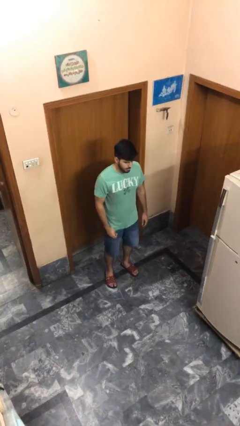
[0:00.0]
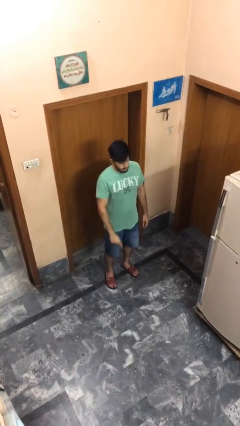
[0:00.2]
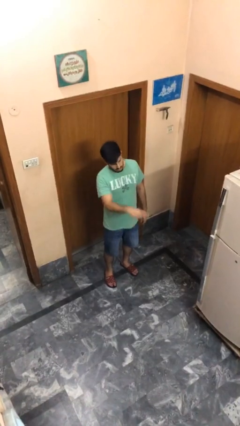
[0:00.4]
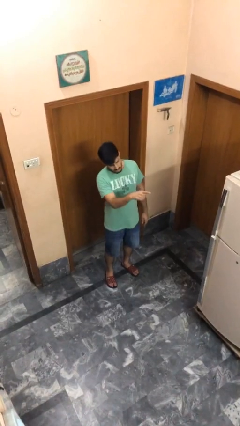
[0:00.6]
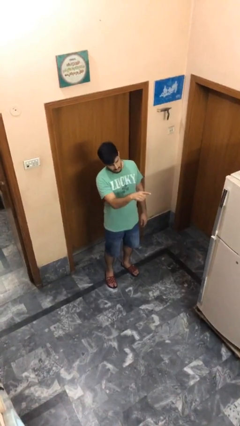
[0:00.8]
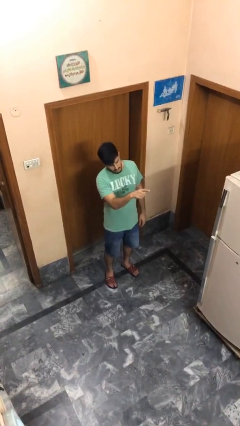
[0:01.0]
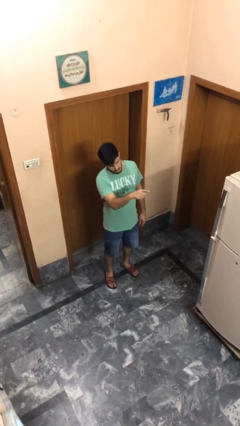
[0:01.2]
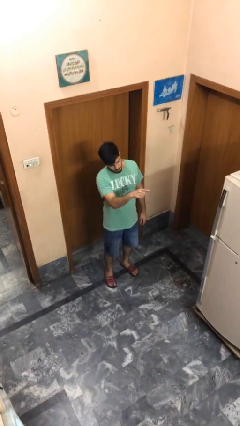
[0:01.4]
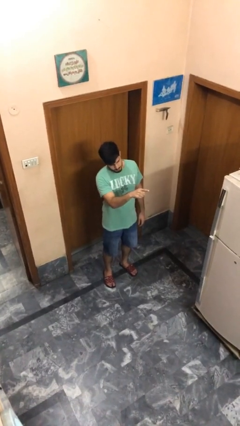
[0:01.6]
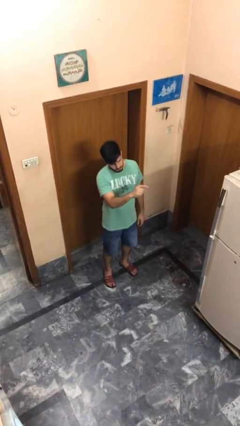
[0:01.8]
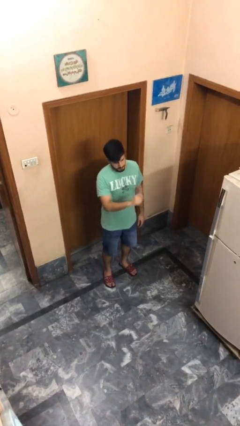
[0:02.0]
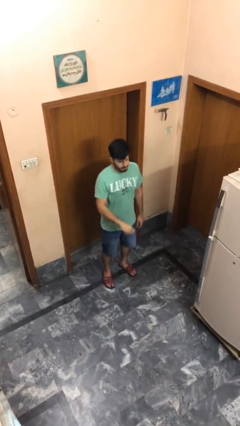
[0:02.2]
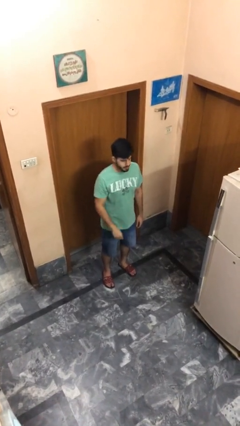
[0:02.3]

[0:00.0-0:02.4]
person points at person

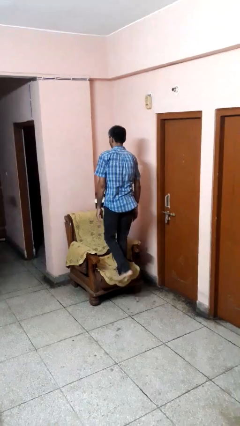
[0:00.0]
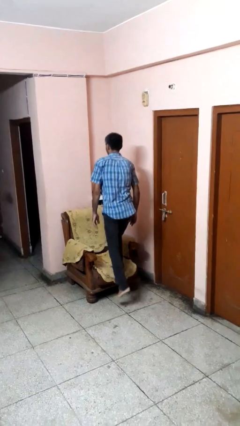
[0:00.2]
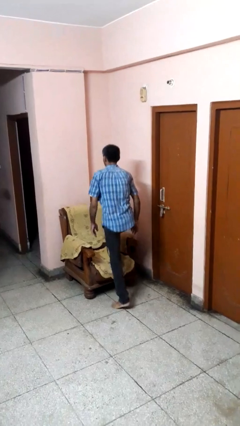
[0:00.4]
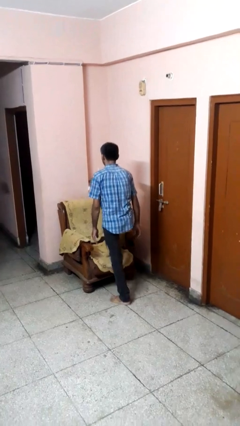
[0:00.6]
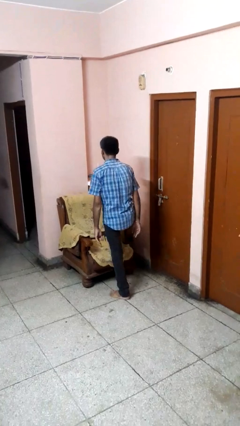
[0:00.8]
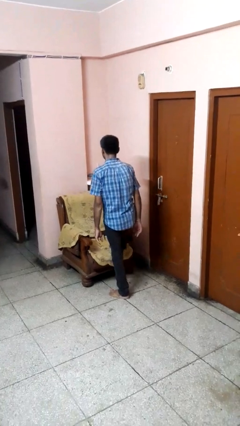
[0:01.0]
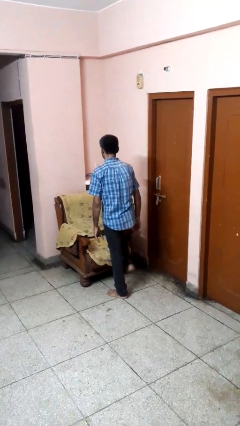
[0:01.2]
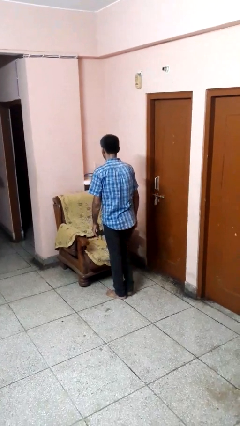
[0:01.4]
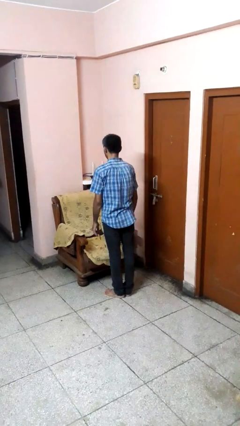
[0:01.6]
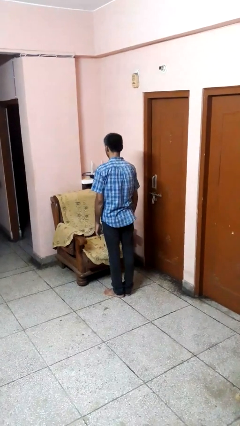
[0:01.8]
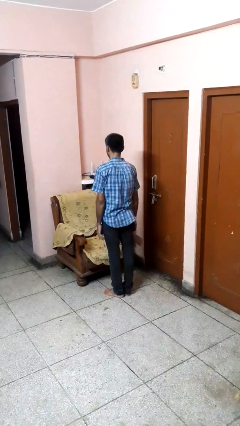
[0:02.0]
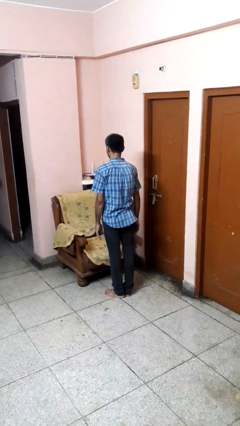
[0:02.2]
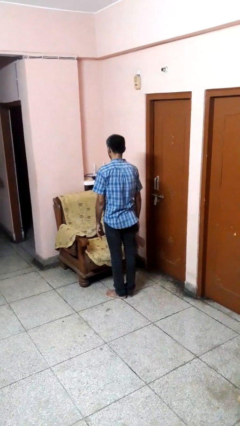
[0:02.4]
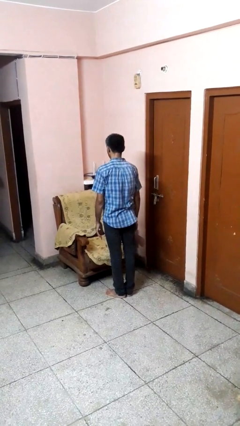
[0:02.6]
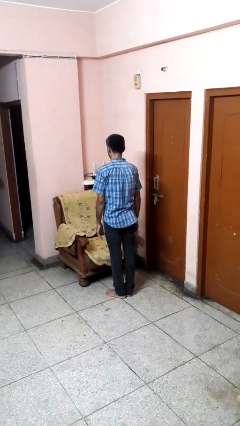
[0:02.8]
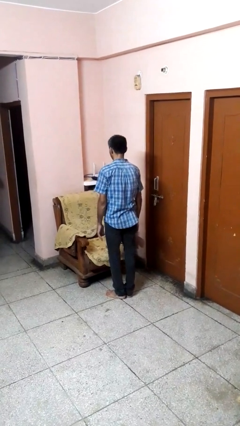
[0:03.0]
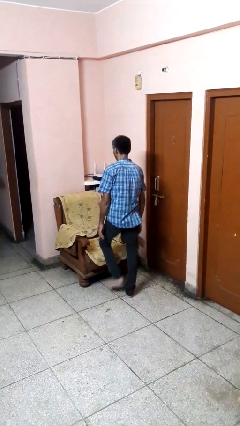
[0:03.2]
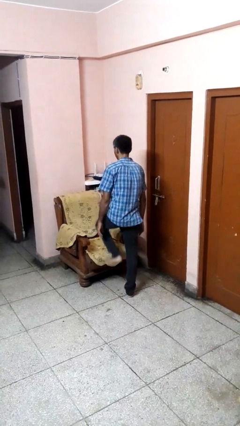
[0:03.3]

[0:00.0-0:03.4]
person climbs off couch

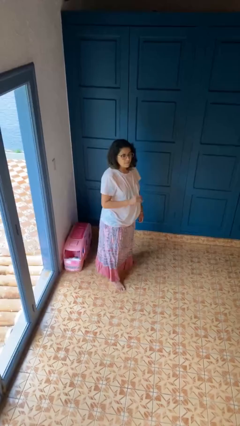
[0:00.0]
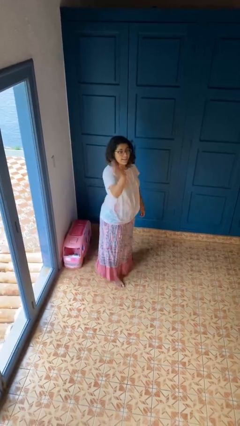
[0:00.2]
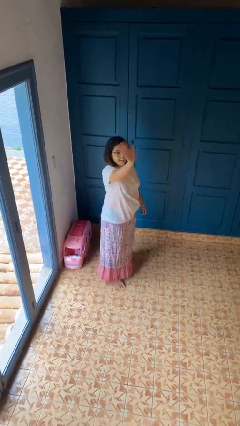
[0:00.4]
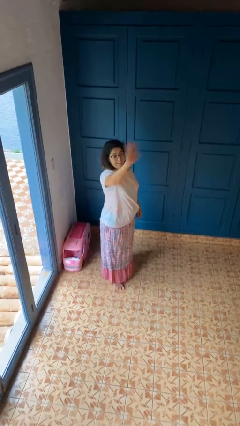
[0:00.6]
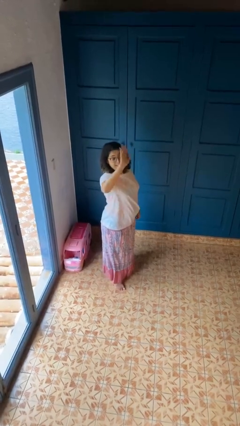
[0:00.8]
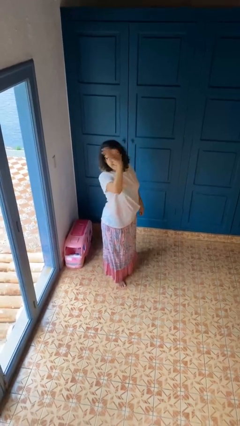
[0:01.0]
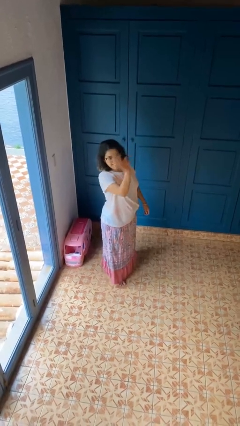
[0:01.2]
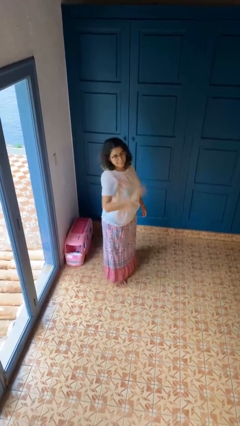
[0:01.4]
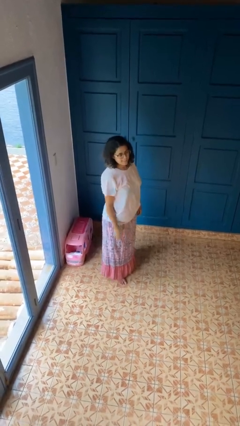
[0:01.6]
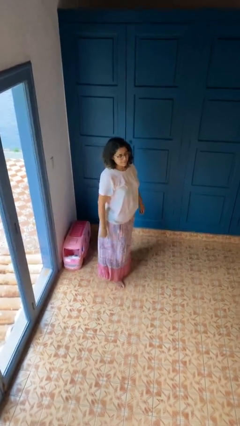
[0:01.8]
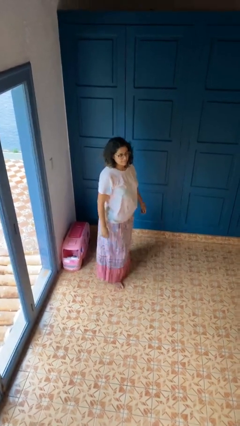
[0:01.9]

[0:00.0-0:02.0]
person waves at person

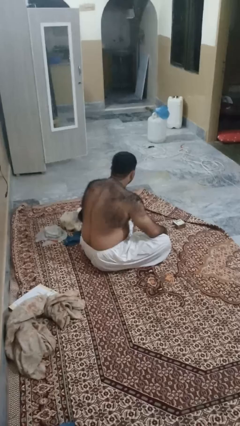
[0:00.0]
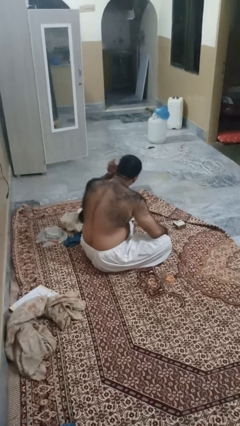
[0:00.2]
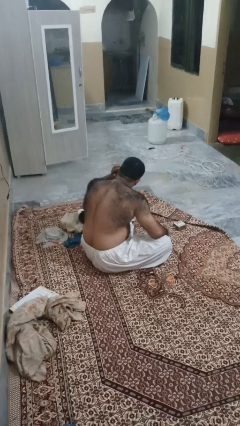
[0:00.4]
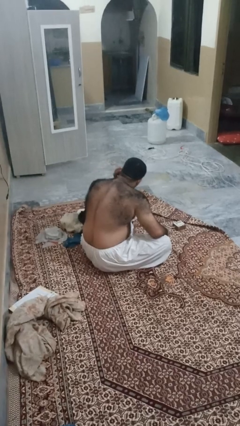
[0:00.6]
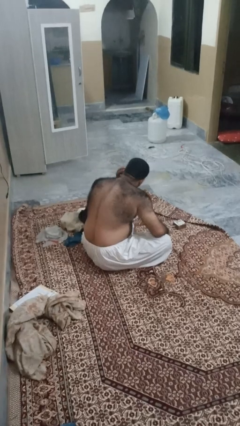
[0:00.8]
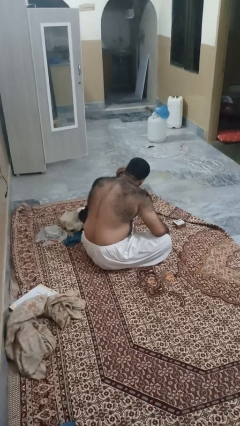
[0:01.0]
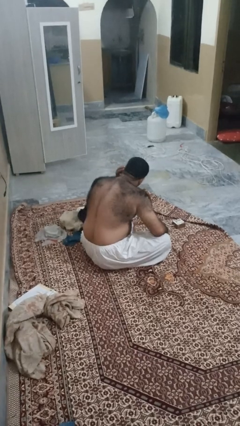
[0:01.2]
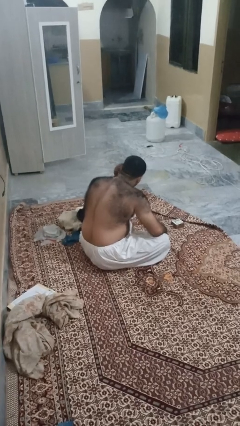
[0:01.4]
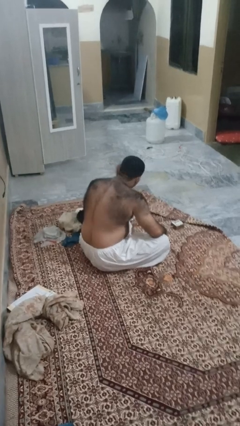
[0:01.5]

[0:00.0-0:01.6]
person gestures listen closely

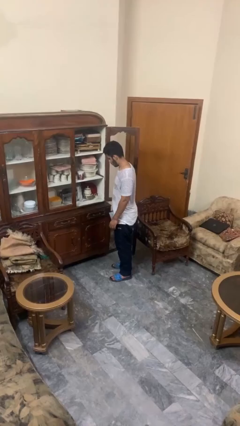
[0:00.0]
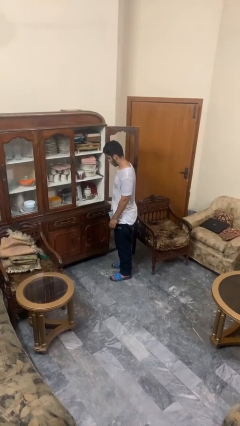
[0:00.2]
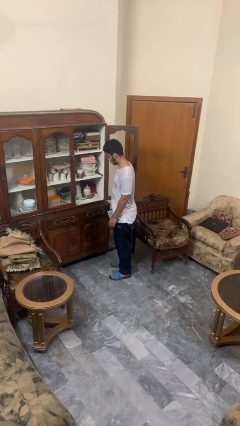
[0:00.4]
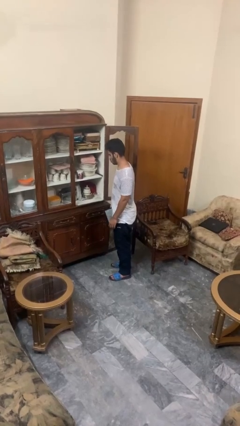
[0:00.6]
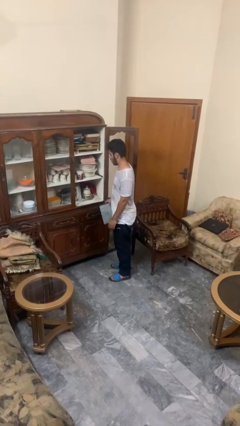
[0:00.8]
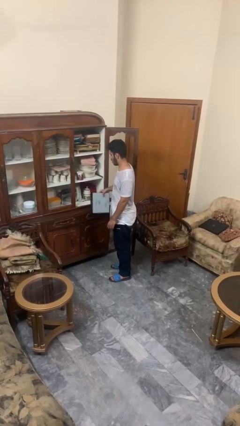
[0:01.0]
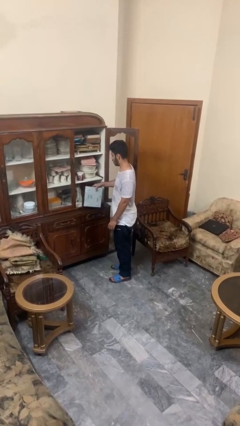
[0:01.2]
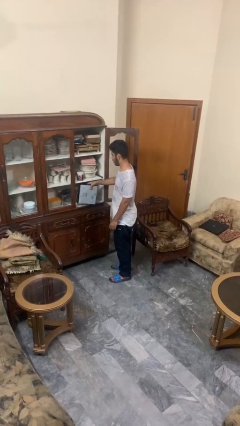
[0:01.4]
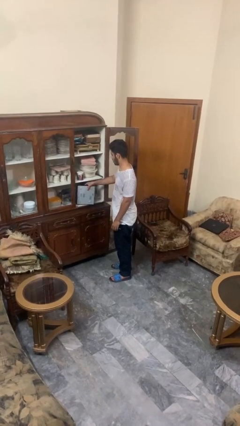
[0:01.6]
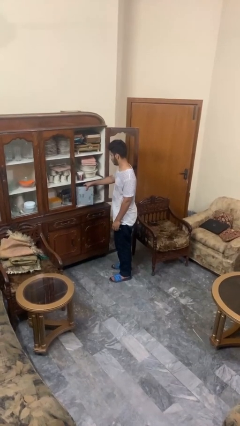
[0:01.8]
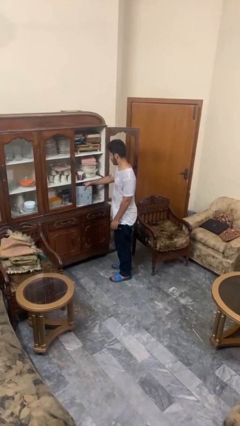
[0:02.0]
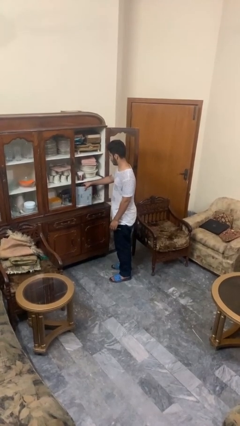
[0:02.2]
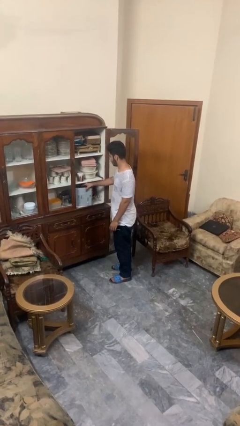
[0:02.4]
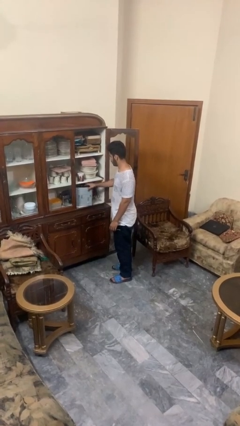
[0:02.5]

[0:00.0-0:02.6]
person puts down object into cabinet

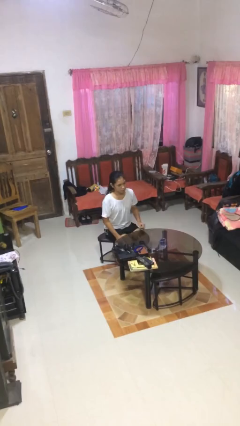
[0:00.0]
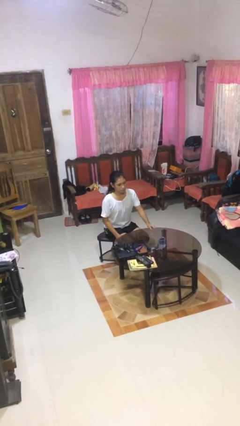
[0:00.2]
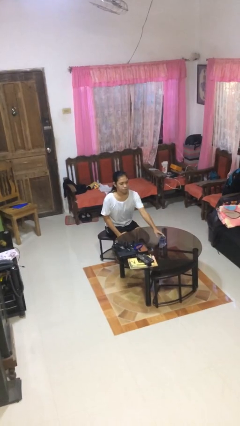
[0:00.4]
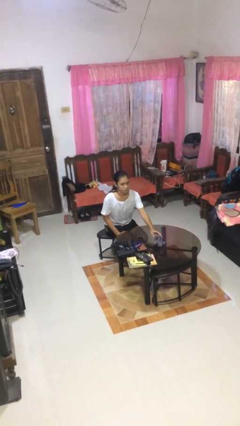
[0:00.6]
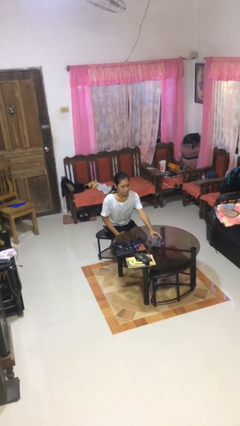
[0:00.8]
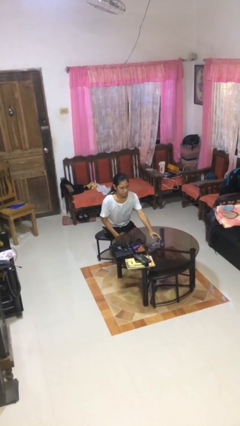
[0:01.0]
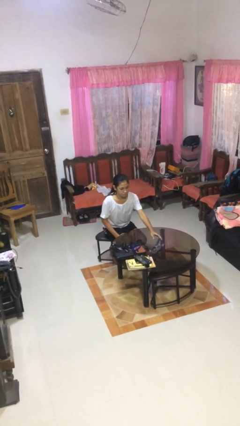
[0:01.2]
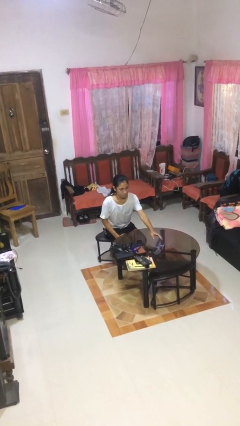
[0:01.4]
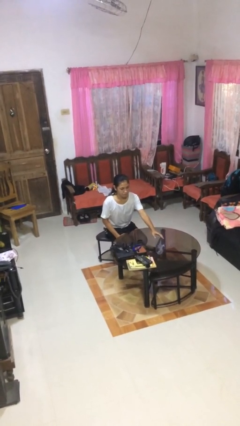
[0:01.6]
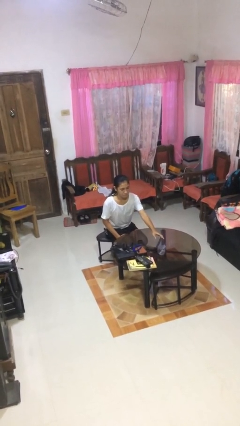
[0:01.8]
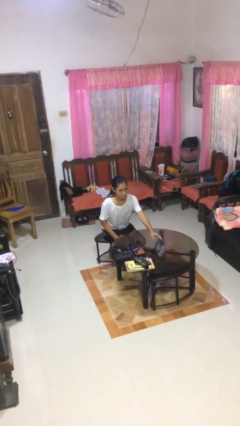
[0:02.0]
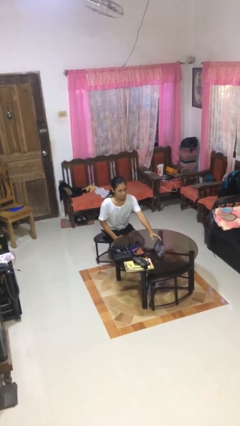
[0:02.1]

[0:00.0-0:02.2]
person knocks over glass

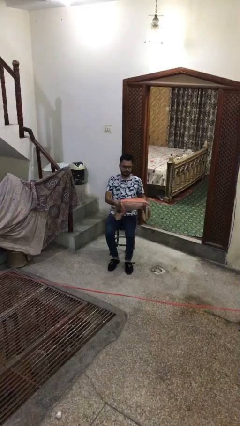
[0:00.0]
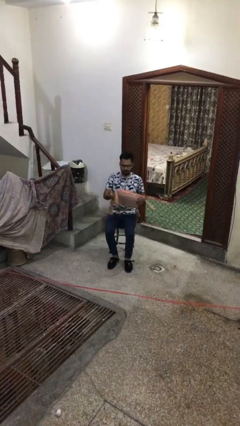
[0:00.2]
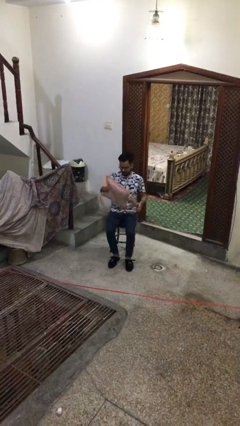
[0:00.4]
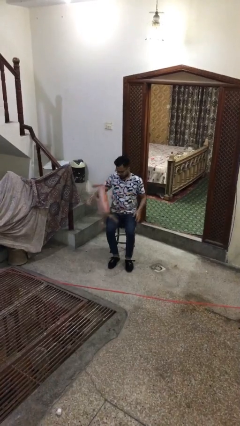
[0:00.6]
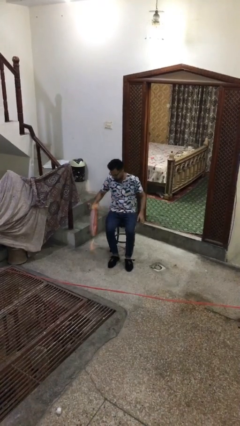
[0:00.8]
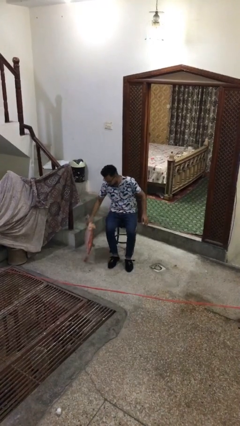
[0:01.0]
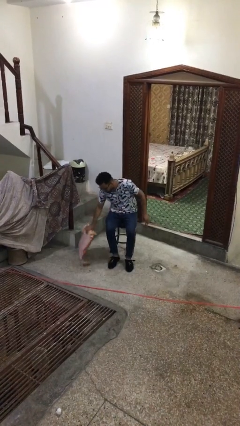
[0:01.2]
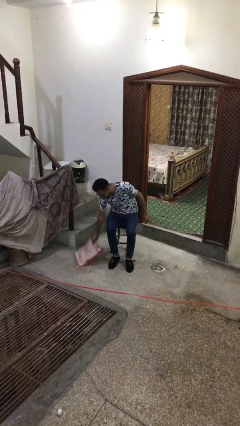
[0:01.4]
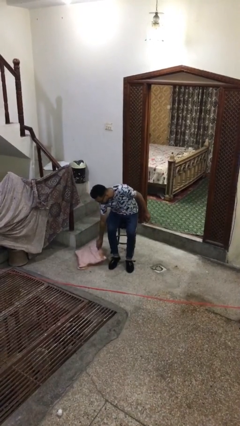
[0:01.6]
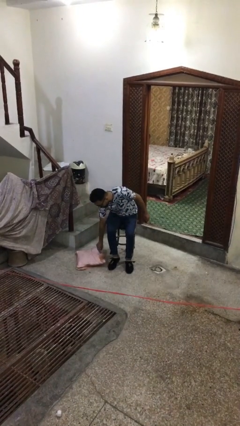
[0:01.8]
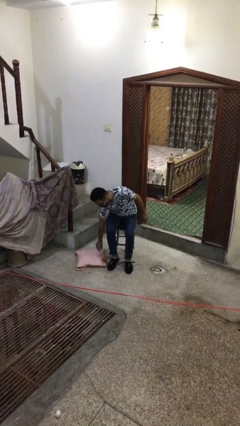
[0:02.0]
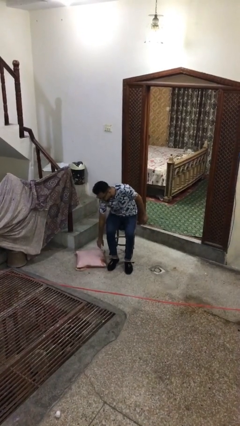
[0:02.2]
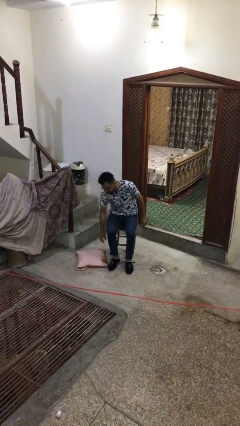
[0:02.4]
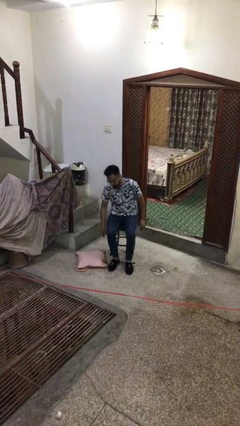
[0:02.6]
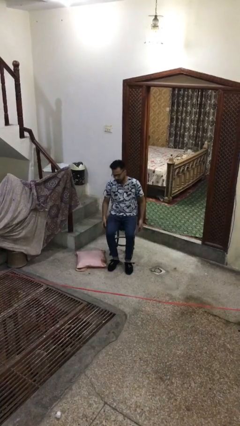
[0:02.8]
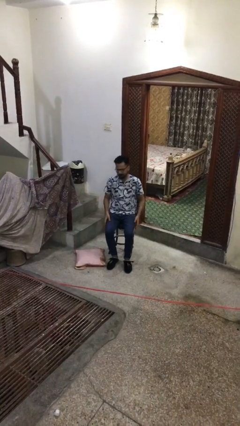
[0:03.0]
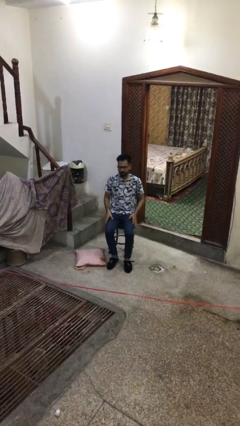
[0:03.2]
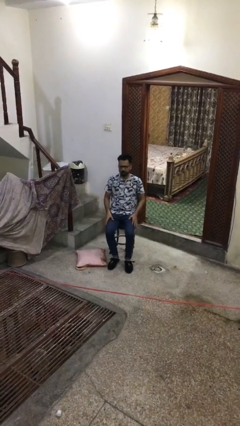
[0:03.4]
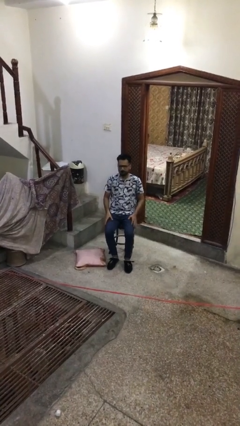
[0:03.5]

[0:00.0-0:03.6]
person puts down object on floor
